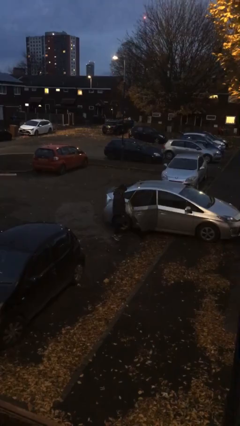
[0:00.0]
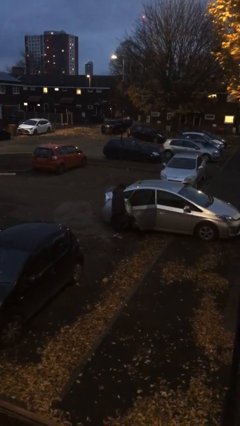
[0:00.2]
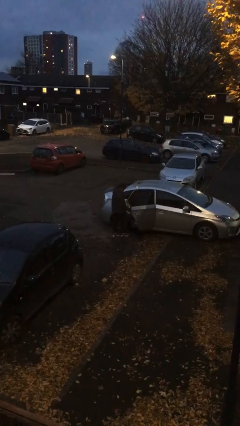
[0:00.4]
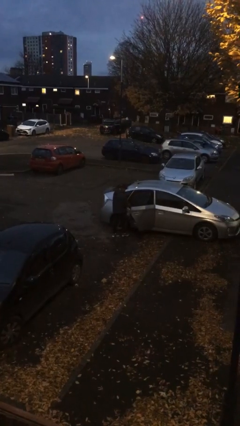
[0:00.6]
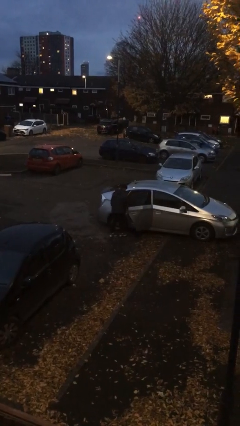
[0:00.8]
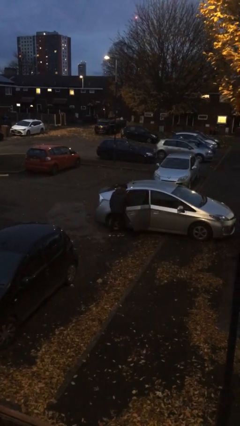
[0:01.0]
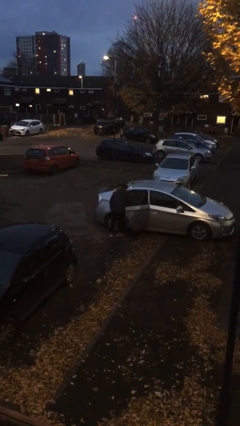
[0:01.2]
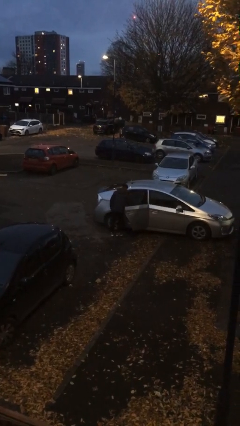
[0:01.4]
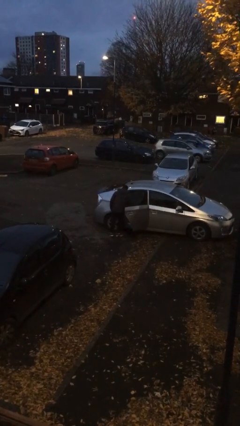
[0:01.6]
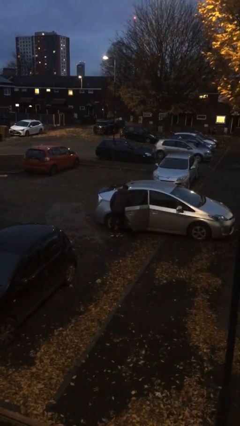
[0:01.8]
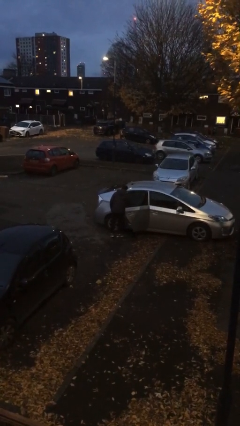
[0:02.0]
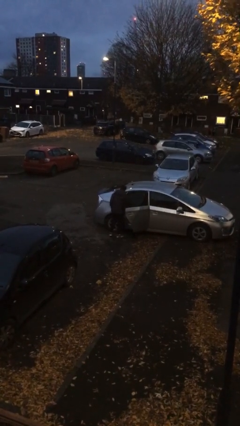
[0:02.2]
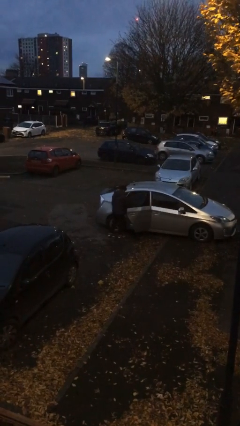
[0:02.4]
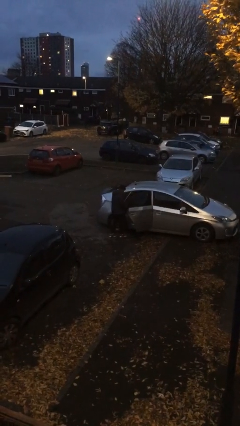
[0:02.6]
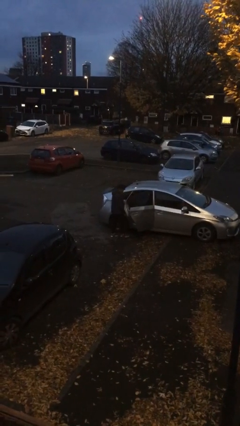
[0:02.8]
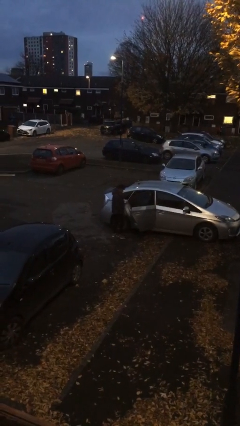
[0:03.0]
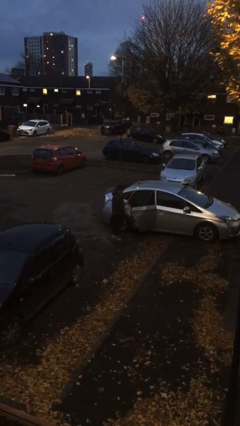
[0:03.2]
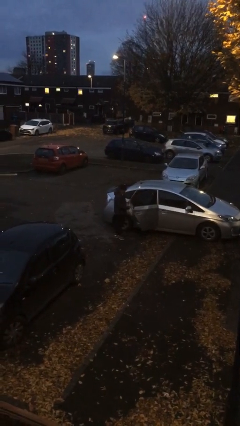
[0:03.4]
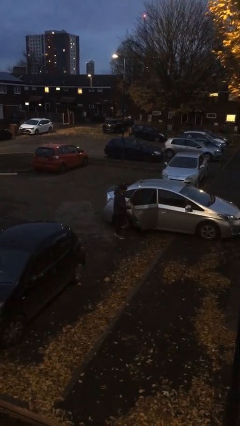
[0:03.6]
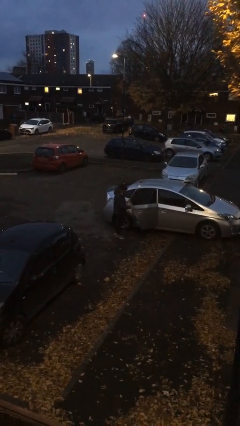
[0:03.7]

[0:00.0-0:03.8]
person loads car

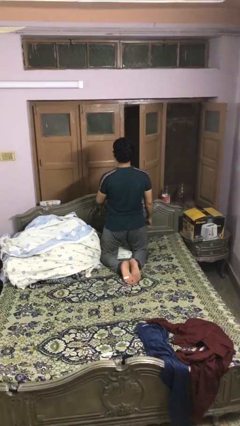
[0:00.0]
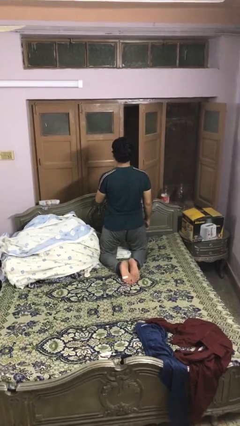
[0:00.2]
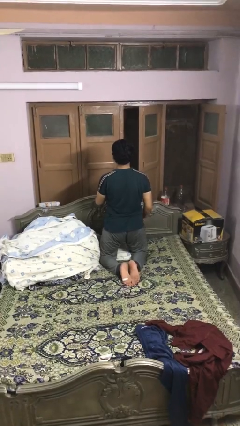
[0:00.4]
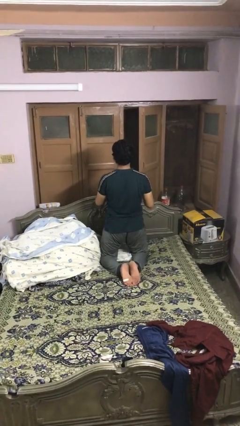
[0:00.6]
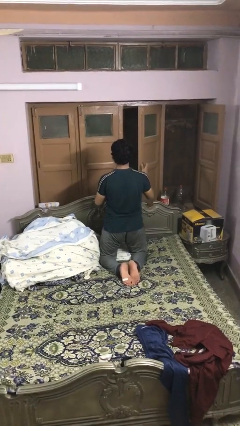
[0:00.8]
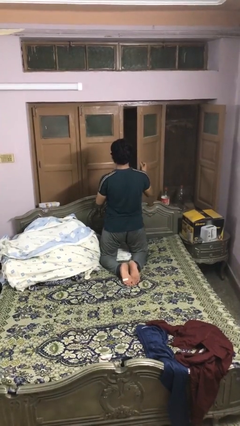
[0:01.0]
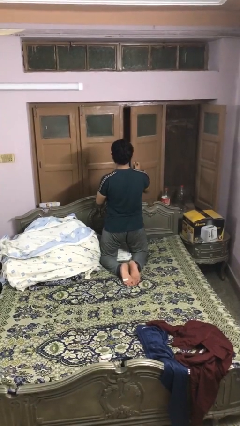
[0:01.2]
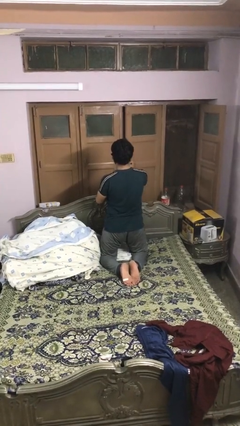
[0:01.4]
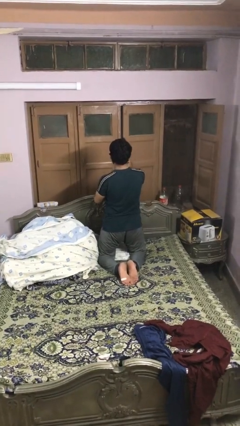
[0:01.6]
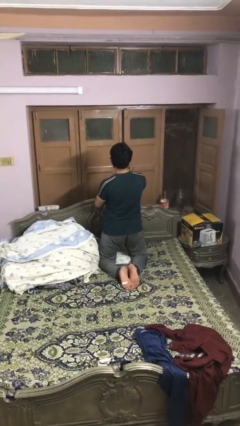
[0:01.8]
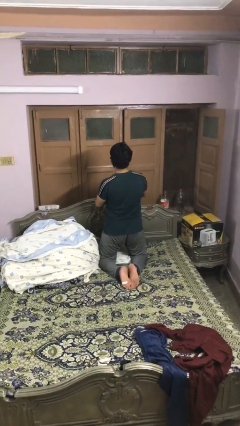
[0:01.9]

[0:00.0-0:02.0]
person closes home window

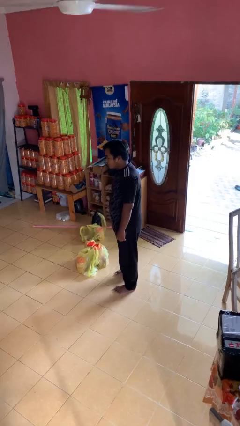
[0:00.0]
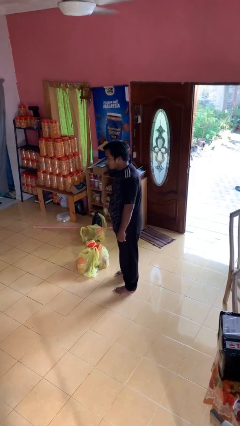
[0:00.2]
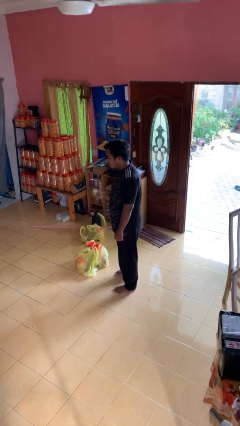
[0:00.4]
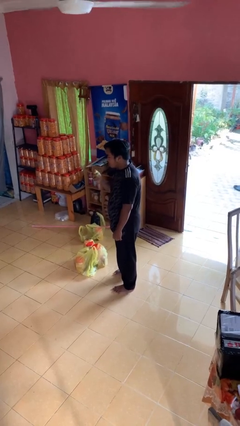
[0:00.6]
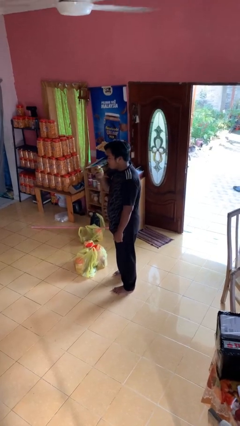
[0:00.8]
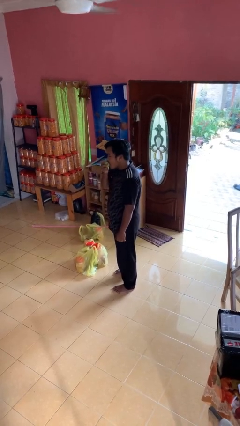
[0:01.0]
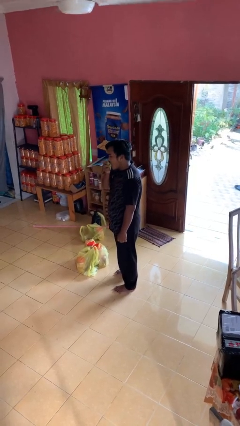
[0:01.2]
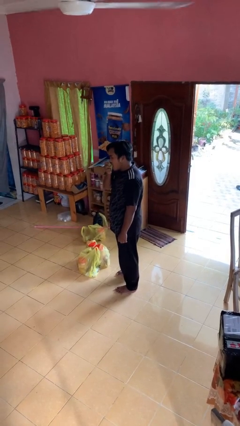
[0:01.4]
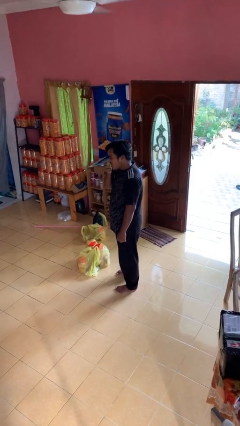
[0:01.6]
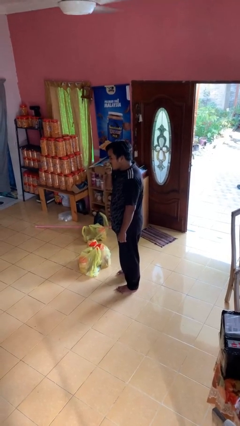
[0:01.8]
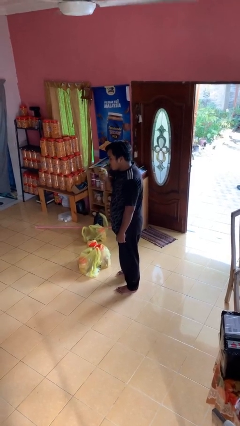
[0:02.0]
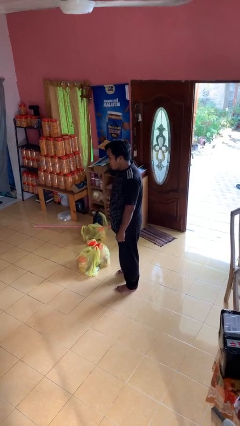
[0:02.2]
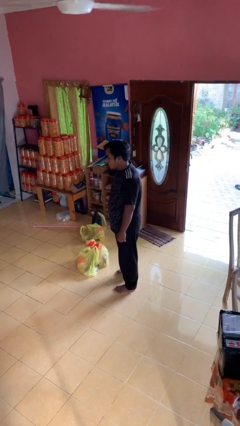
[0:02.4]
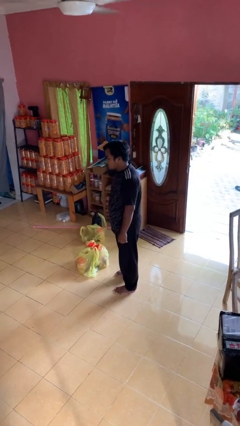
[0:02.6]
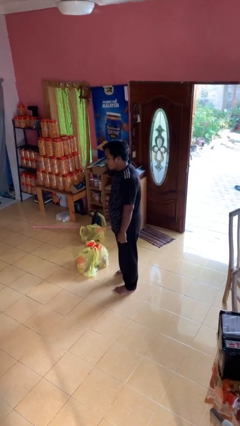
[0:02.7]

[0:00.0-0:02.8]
person eats apple

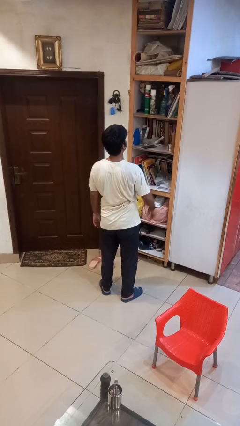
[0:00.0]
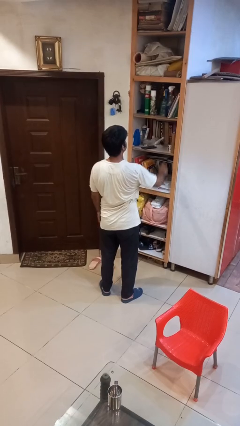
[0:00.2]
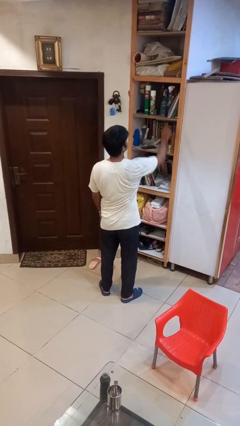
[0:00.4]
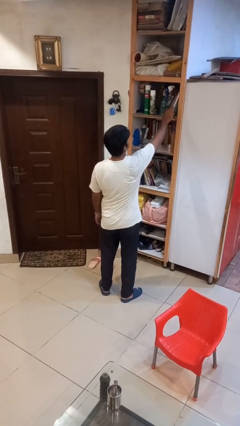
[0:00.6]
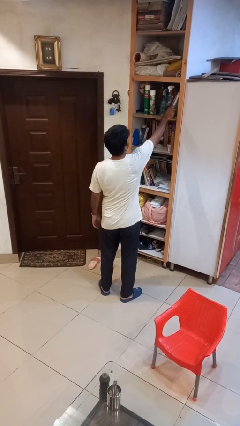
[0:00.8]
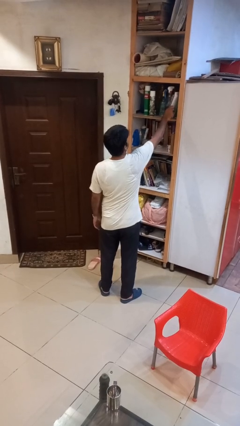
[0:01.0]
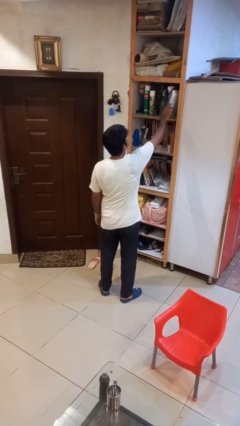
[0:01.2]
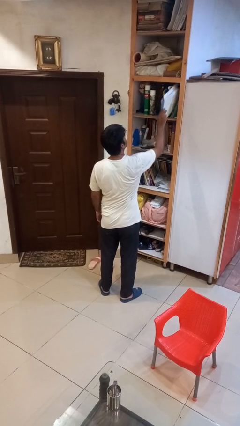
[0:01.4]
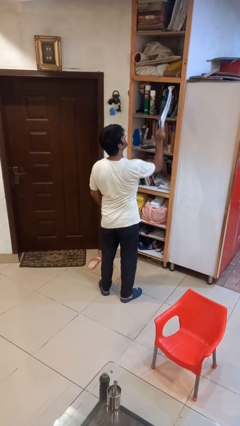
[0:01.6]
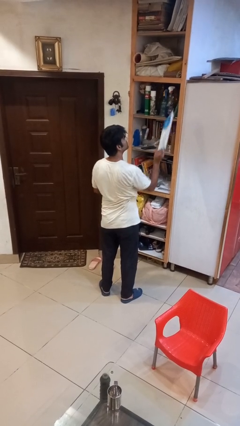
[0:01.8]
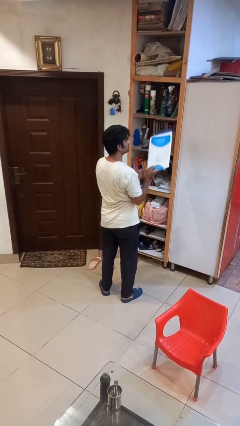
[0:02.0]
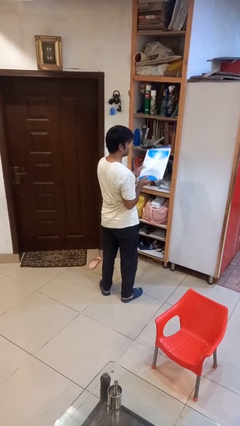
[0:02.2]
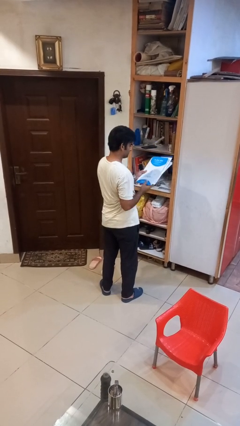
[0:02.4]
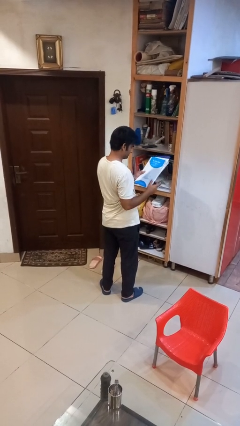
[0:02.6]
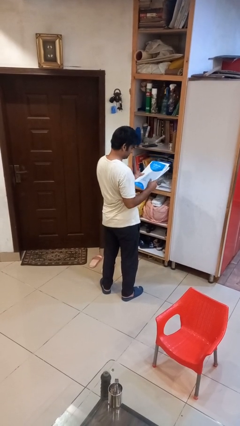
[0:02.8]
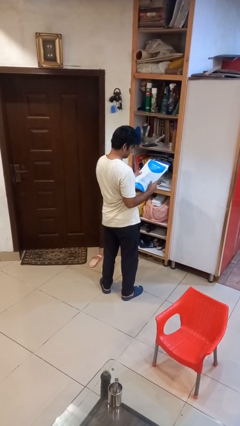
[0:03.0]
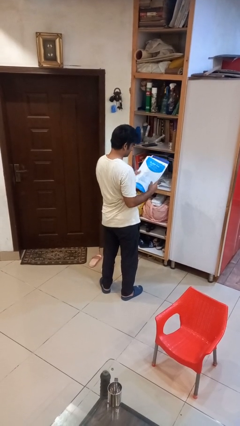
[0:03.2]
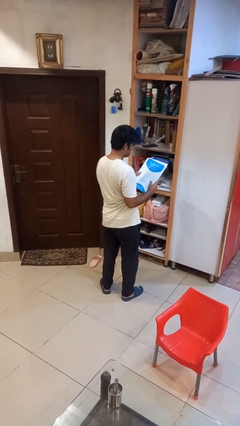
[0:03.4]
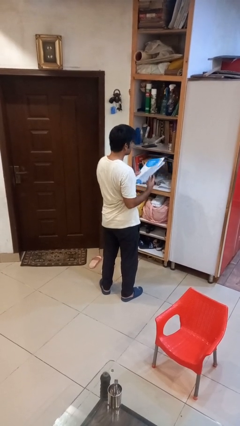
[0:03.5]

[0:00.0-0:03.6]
person picks up object from shelf

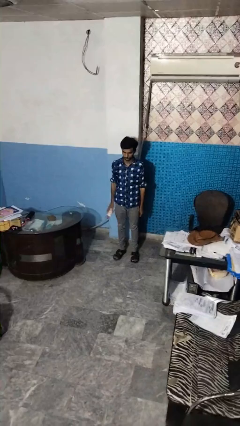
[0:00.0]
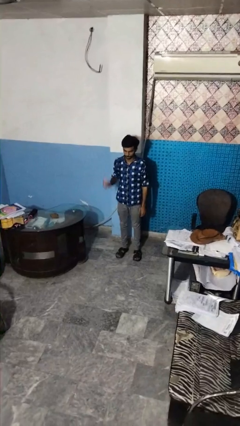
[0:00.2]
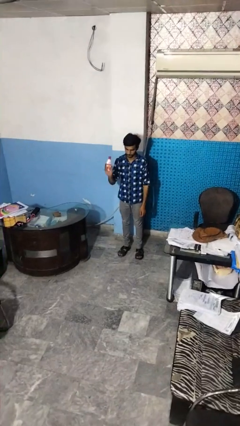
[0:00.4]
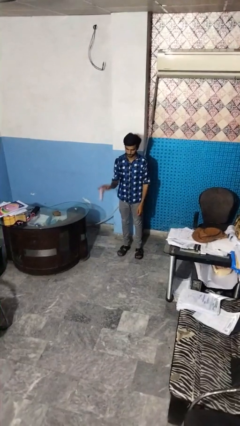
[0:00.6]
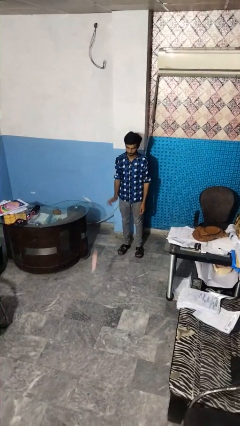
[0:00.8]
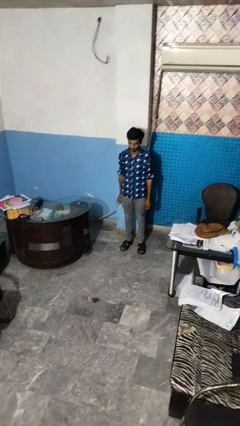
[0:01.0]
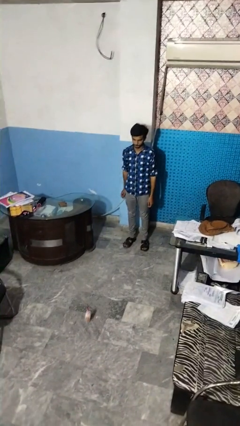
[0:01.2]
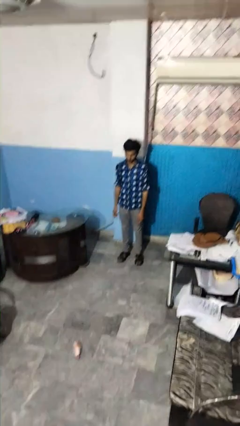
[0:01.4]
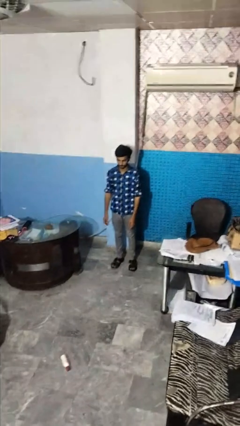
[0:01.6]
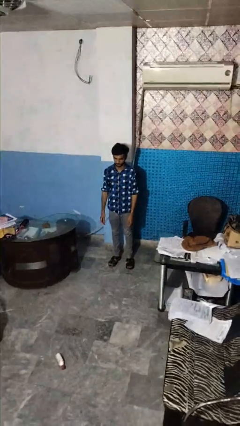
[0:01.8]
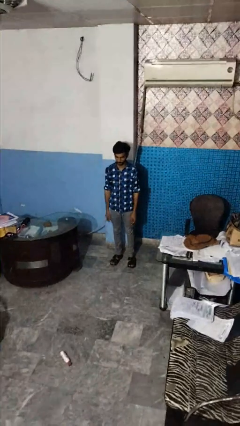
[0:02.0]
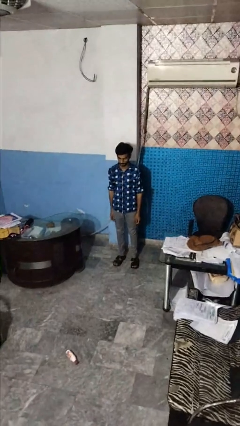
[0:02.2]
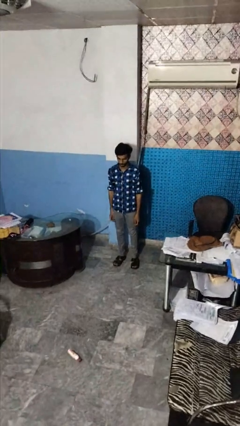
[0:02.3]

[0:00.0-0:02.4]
person throws object to ground

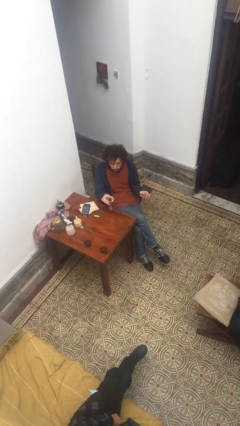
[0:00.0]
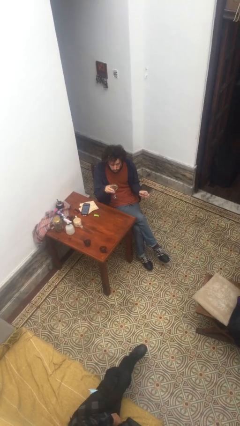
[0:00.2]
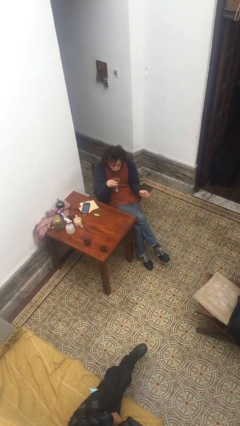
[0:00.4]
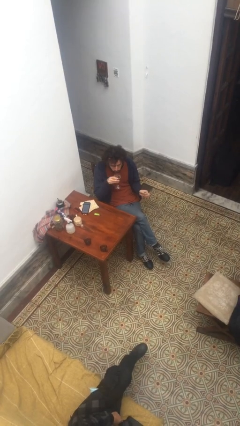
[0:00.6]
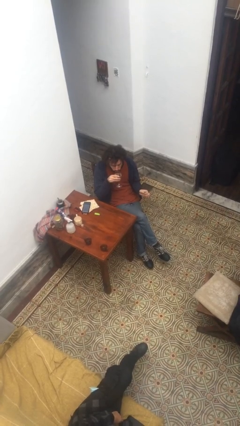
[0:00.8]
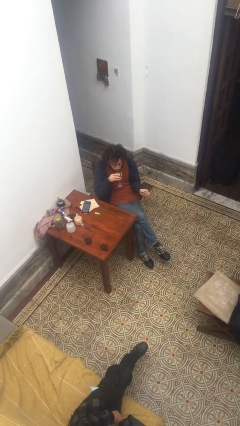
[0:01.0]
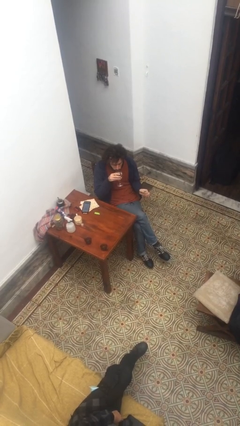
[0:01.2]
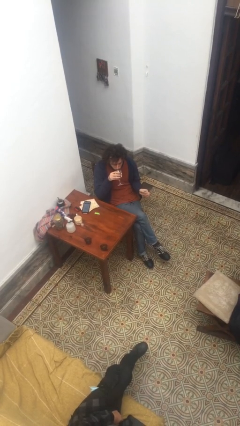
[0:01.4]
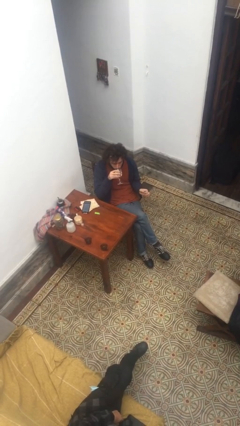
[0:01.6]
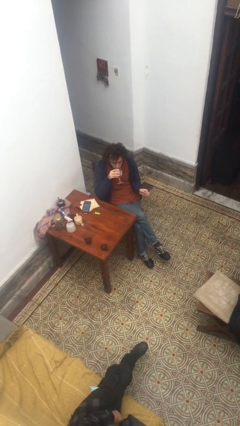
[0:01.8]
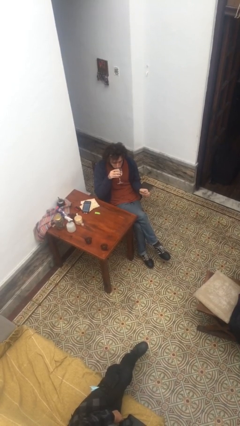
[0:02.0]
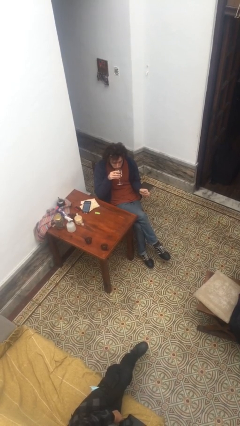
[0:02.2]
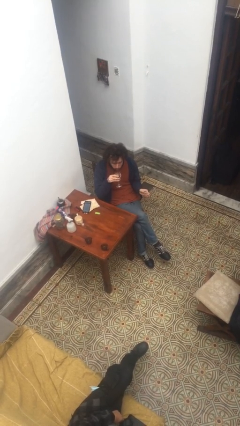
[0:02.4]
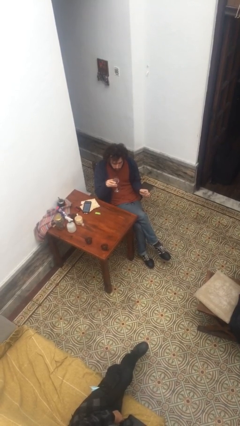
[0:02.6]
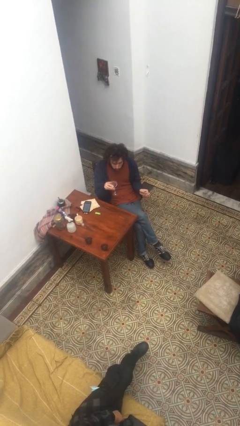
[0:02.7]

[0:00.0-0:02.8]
person drinks from cup
